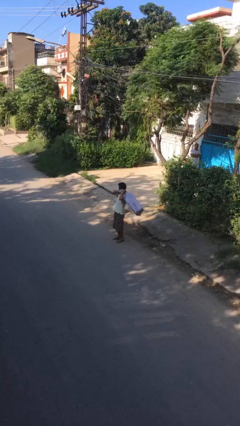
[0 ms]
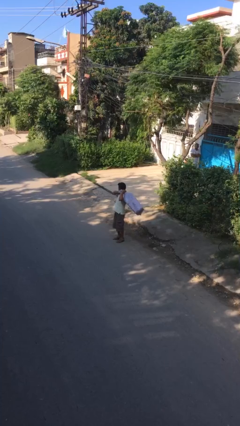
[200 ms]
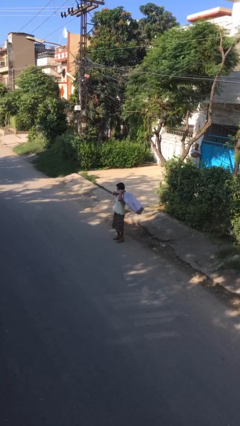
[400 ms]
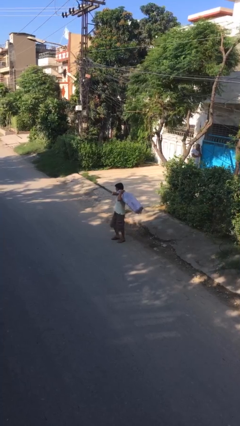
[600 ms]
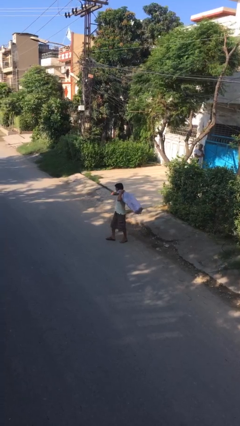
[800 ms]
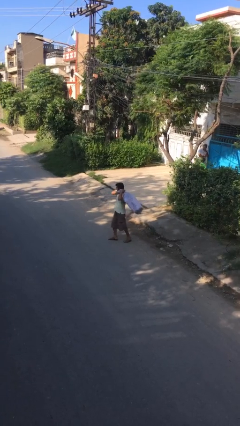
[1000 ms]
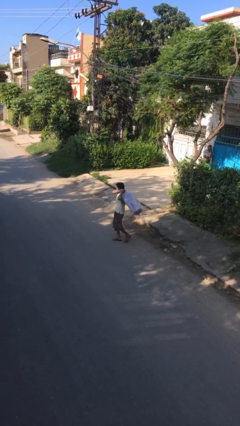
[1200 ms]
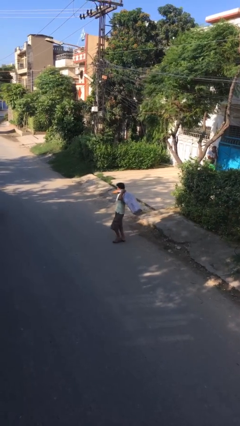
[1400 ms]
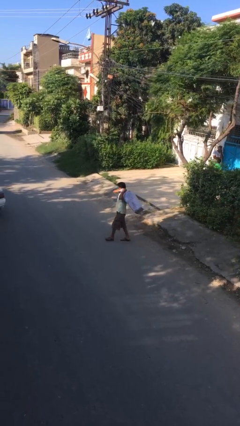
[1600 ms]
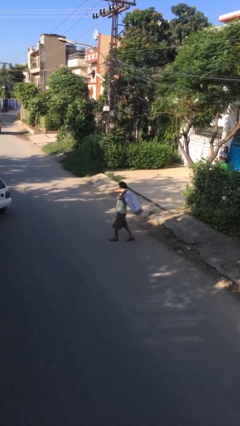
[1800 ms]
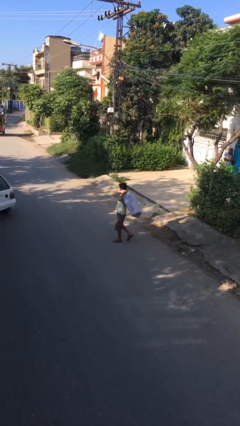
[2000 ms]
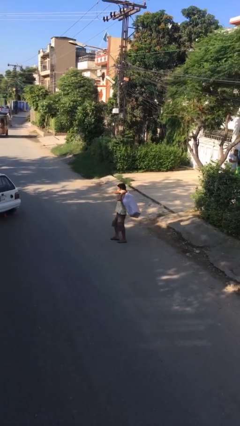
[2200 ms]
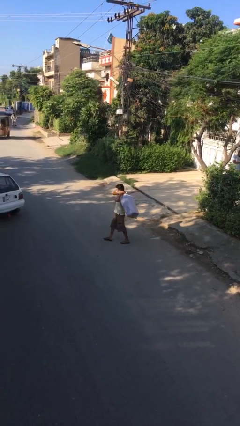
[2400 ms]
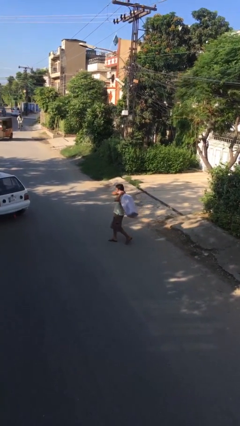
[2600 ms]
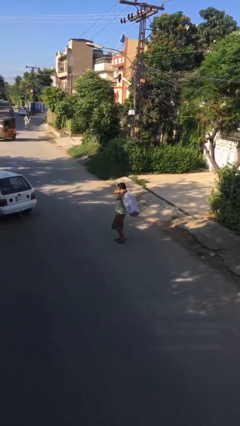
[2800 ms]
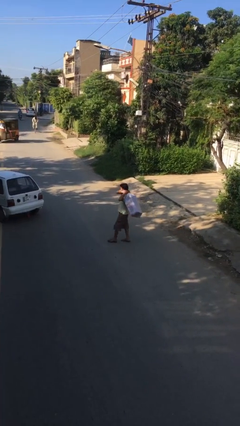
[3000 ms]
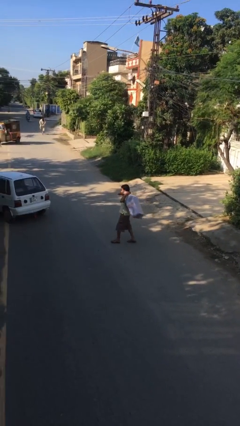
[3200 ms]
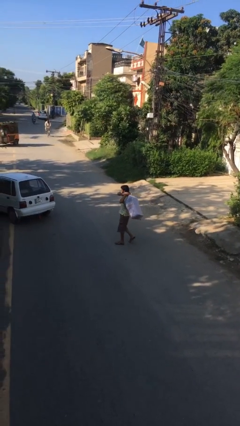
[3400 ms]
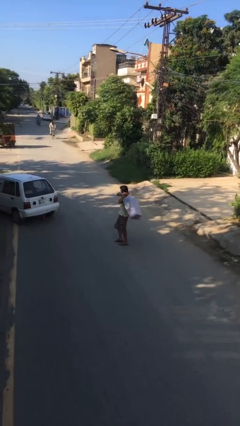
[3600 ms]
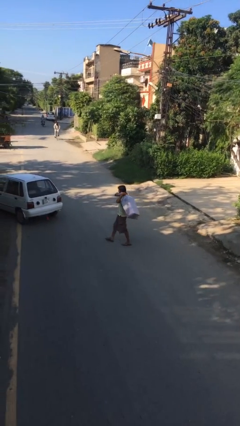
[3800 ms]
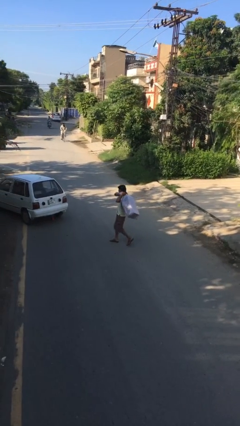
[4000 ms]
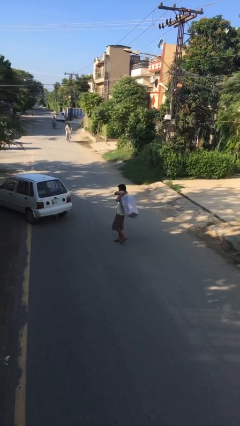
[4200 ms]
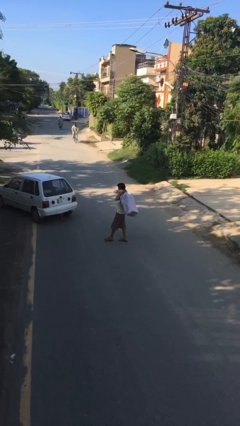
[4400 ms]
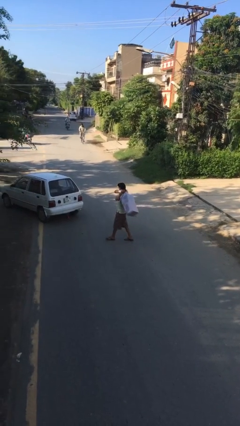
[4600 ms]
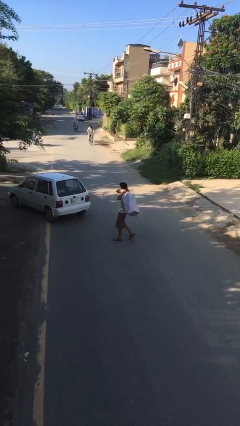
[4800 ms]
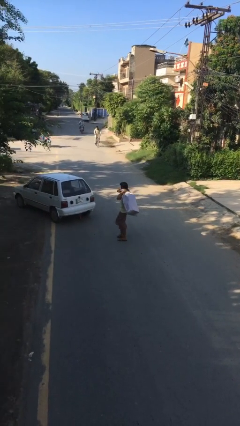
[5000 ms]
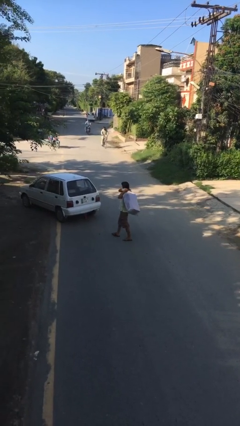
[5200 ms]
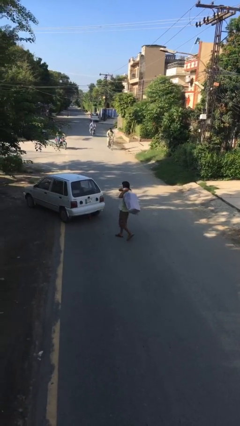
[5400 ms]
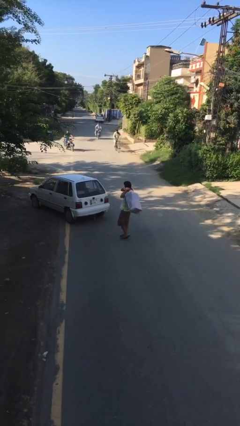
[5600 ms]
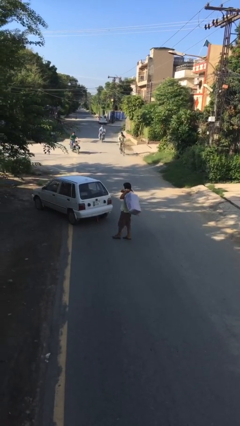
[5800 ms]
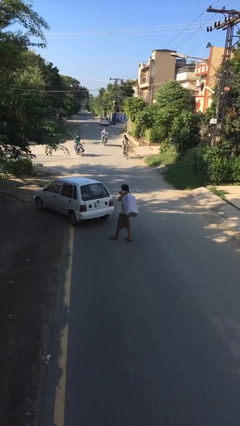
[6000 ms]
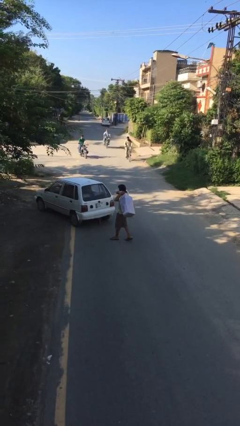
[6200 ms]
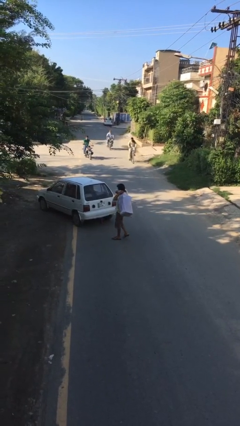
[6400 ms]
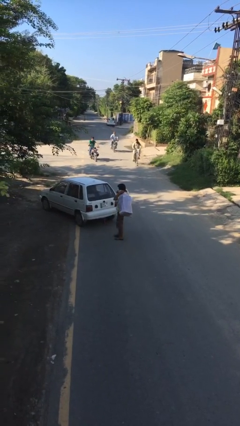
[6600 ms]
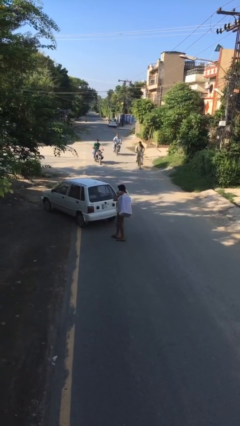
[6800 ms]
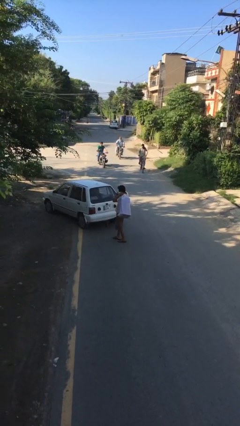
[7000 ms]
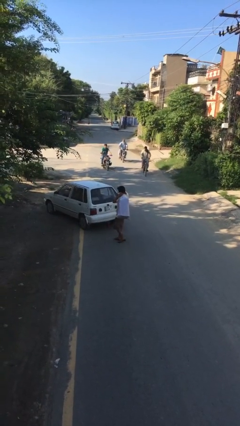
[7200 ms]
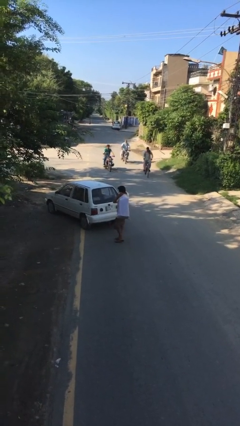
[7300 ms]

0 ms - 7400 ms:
person carries heavy object

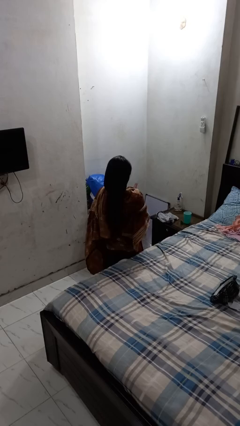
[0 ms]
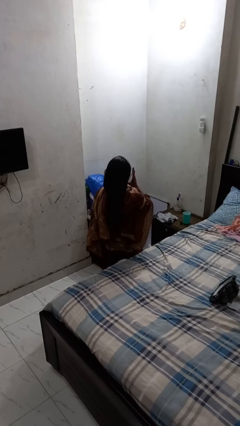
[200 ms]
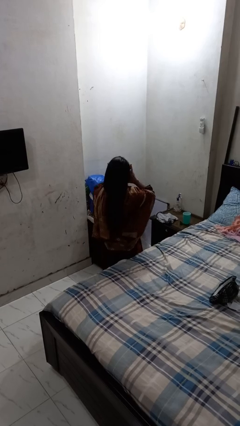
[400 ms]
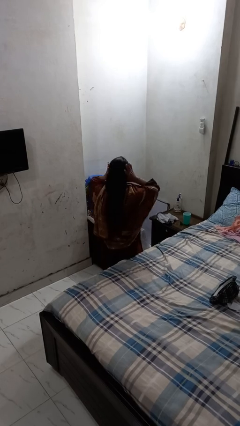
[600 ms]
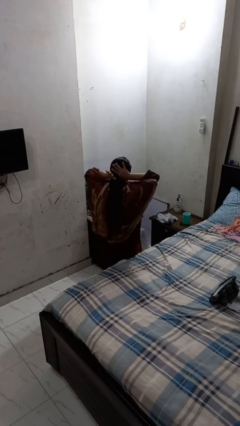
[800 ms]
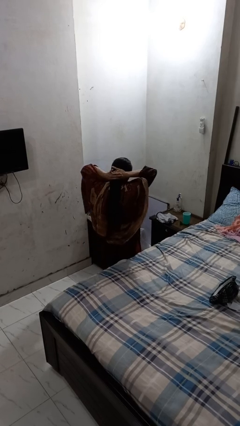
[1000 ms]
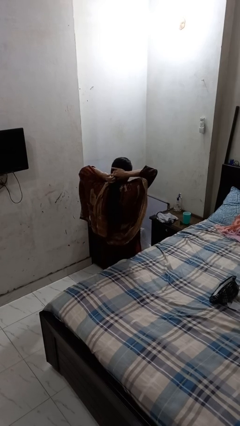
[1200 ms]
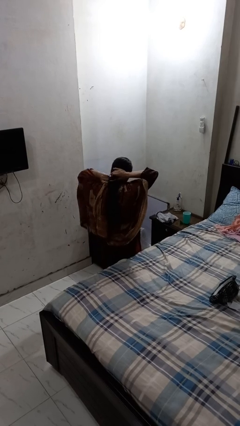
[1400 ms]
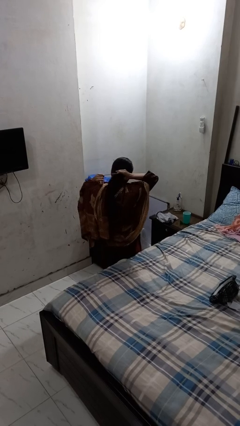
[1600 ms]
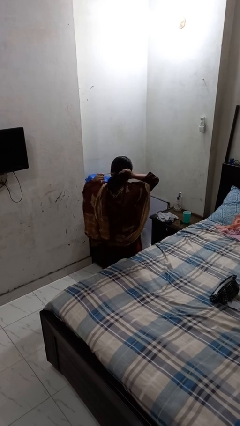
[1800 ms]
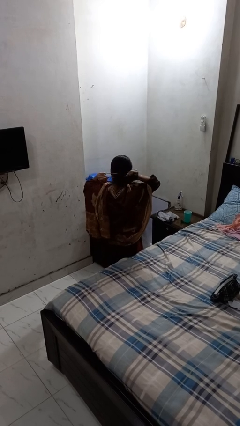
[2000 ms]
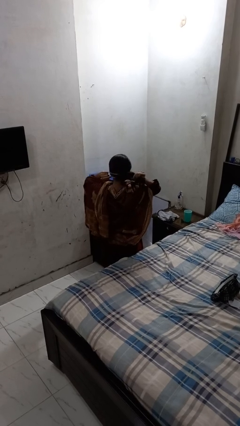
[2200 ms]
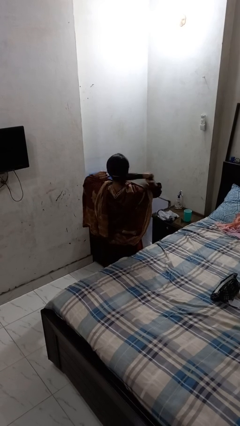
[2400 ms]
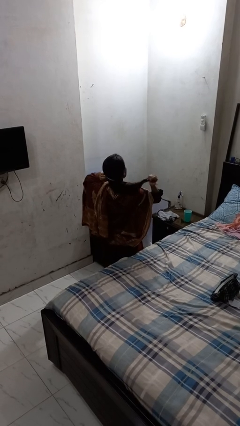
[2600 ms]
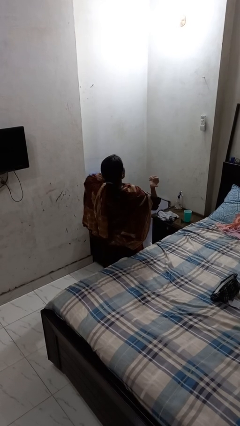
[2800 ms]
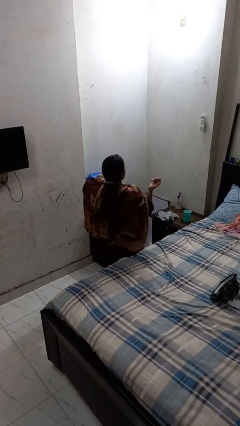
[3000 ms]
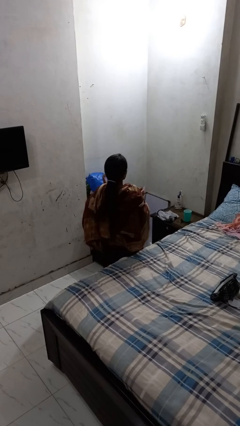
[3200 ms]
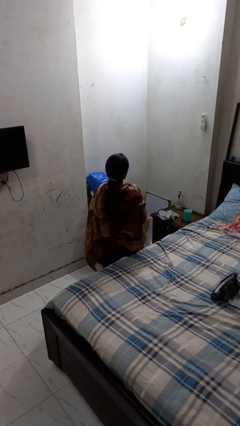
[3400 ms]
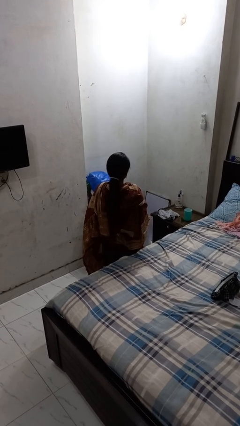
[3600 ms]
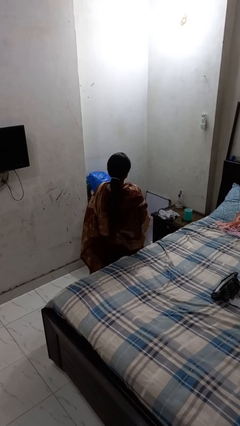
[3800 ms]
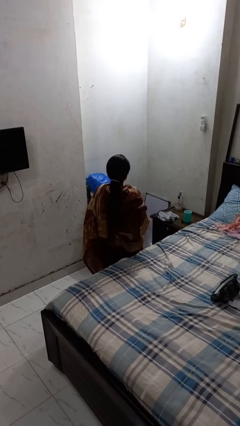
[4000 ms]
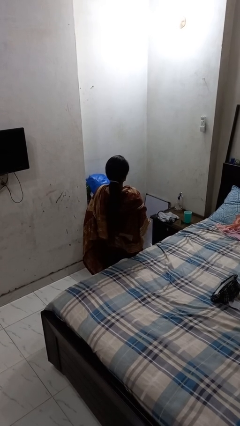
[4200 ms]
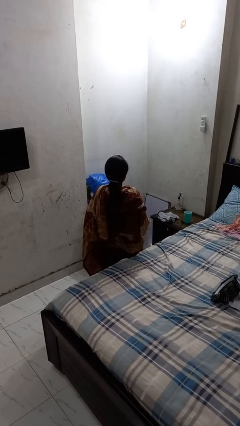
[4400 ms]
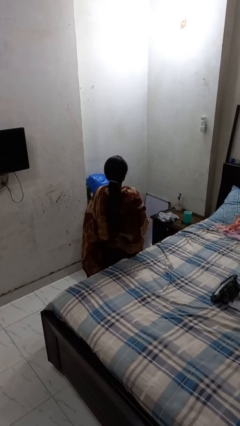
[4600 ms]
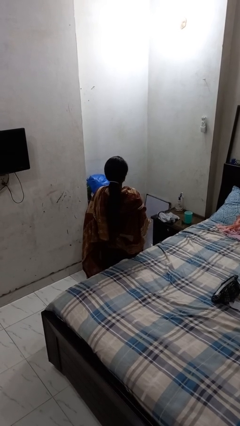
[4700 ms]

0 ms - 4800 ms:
person puts hair in ponytail

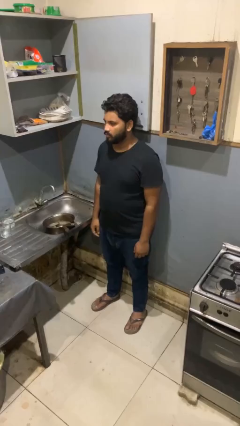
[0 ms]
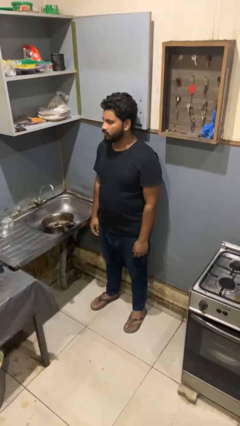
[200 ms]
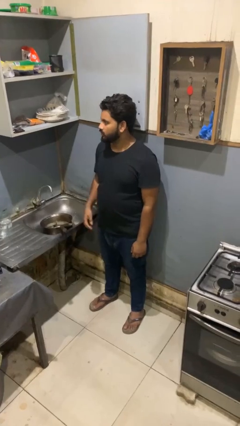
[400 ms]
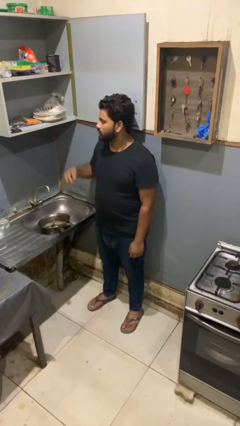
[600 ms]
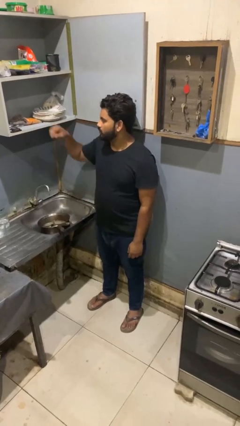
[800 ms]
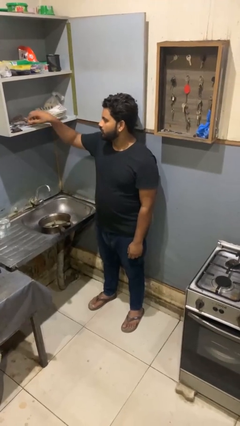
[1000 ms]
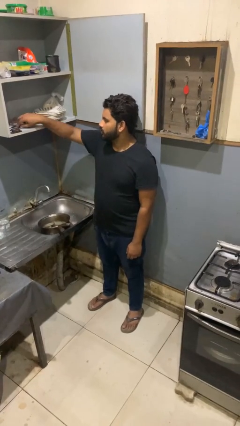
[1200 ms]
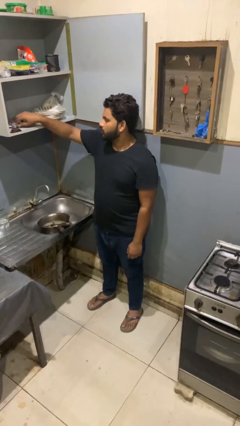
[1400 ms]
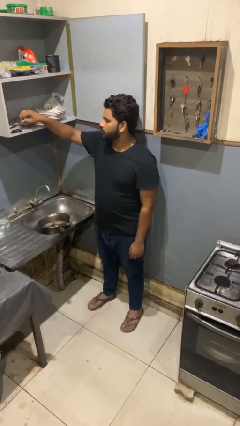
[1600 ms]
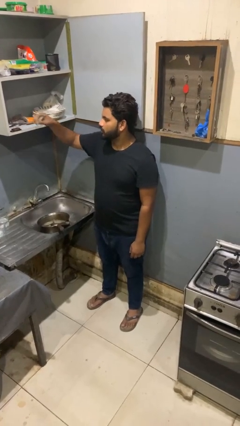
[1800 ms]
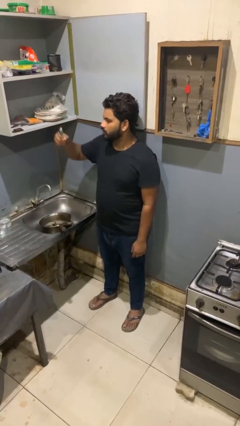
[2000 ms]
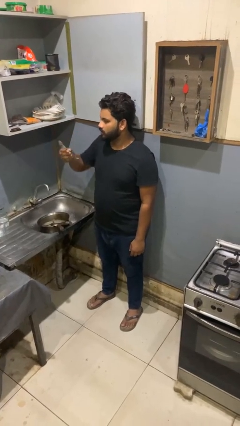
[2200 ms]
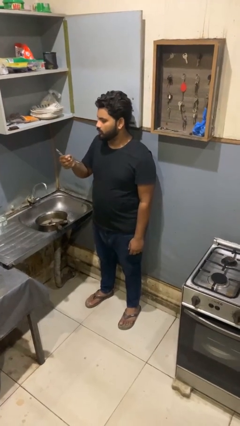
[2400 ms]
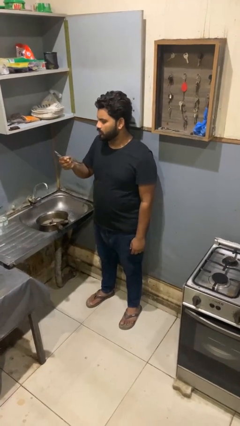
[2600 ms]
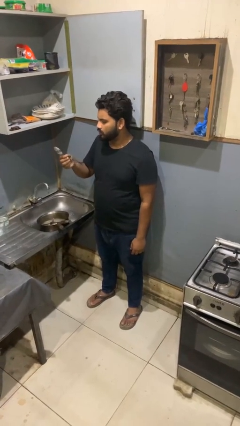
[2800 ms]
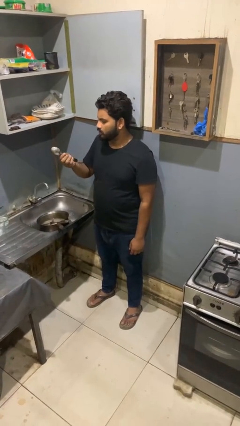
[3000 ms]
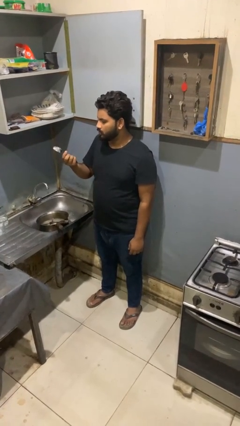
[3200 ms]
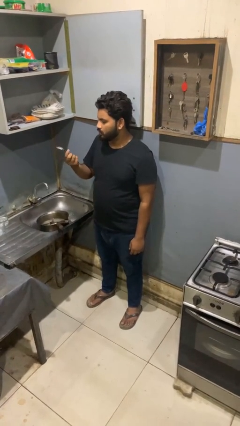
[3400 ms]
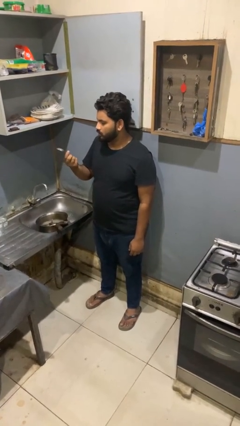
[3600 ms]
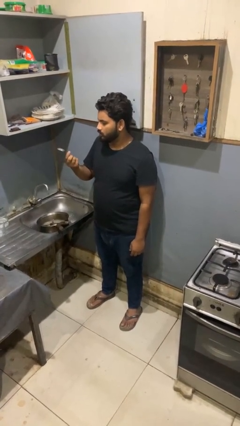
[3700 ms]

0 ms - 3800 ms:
person takes object from kitchen drawer

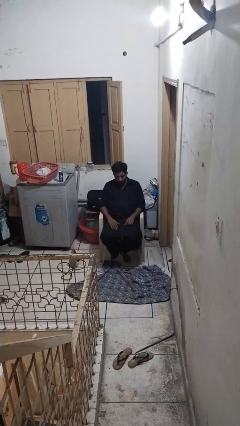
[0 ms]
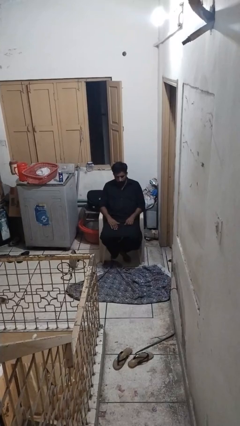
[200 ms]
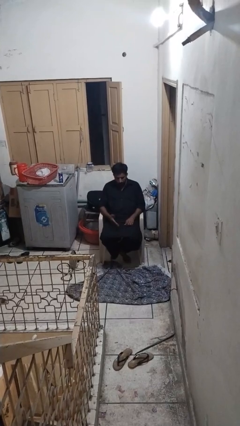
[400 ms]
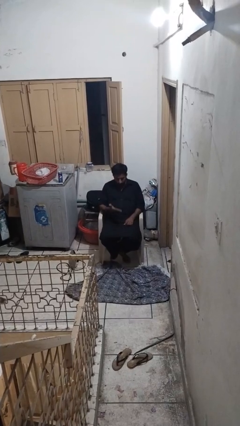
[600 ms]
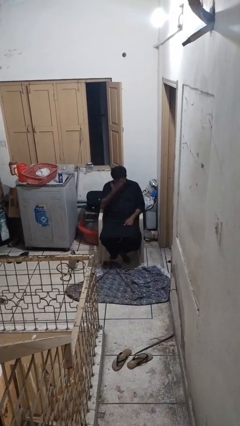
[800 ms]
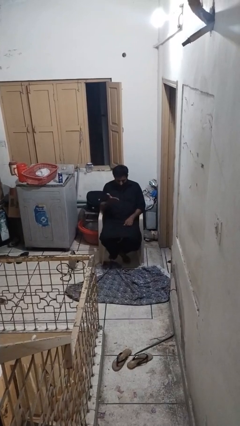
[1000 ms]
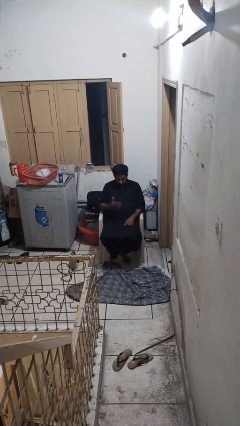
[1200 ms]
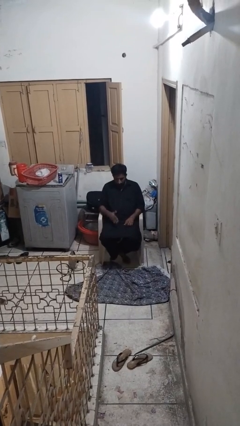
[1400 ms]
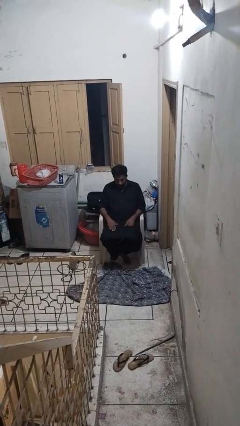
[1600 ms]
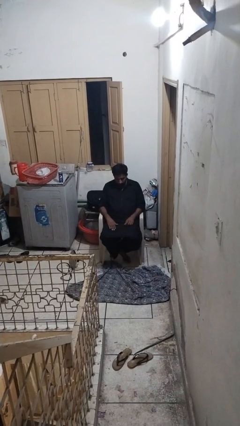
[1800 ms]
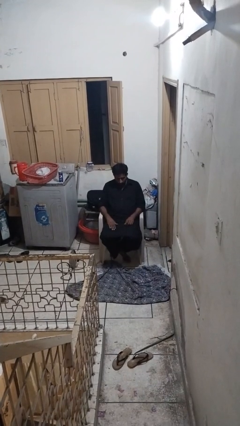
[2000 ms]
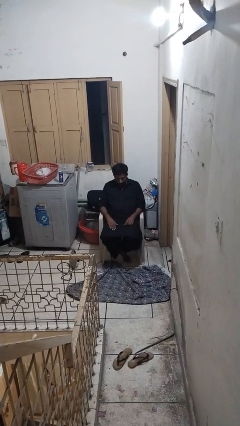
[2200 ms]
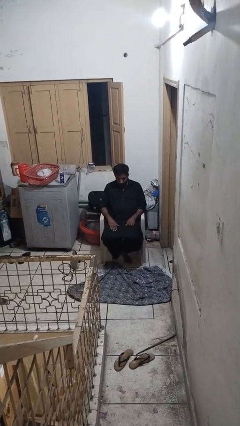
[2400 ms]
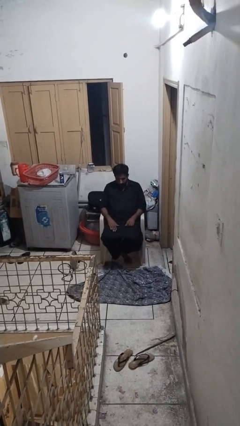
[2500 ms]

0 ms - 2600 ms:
person swats bug
